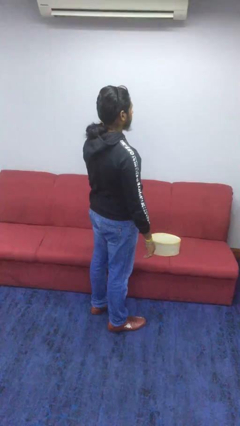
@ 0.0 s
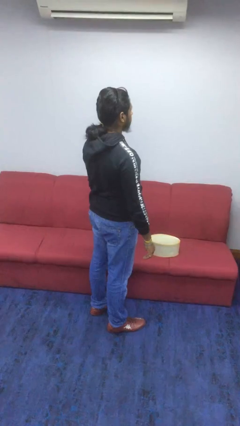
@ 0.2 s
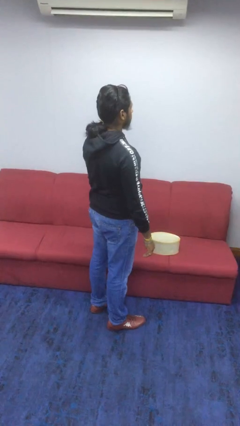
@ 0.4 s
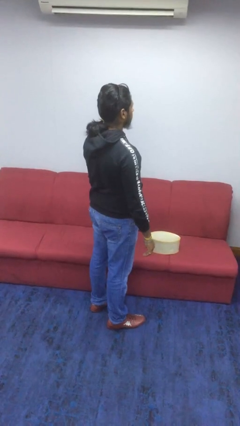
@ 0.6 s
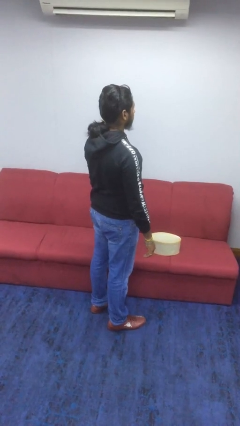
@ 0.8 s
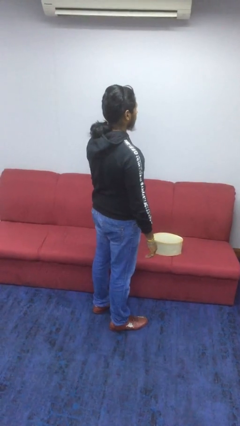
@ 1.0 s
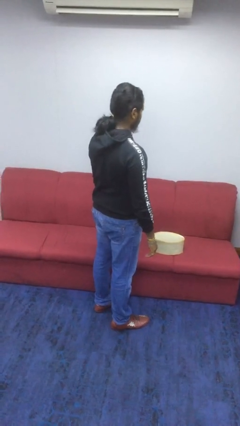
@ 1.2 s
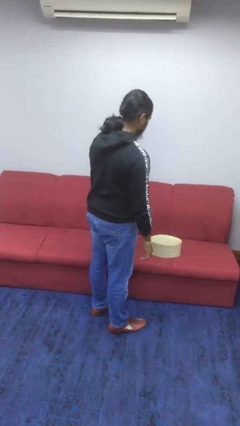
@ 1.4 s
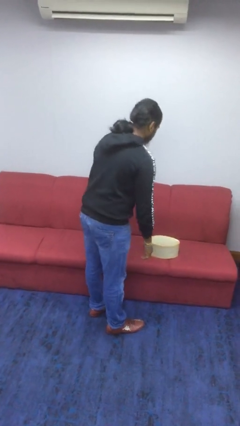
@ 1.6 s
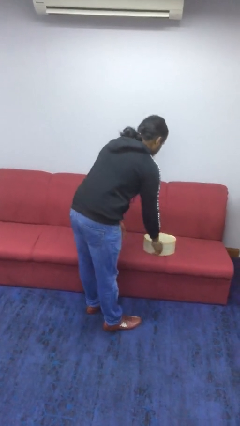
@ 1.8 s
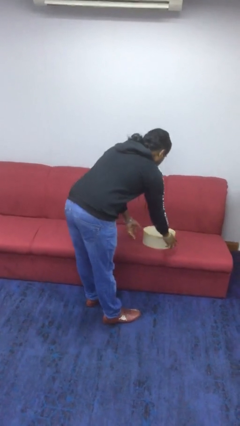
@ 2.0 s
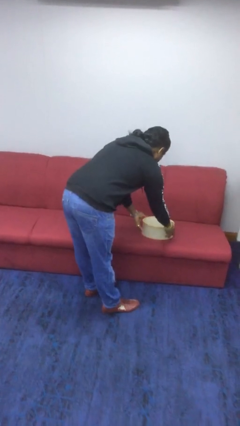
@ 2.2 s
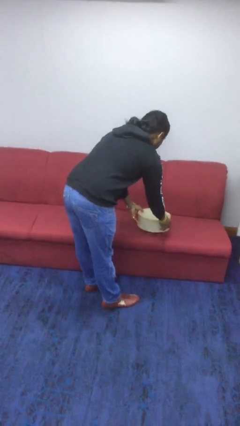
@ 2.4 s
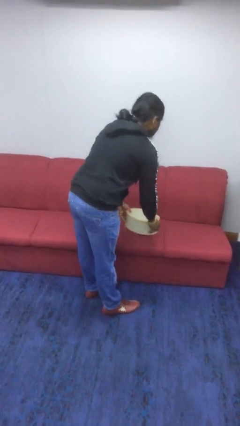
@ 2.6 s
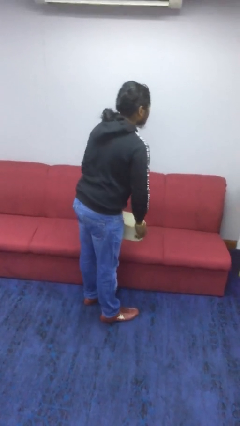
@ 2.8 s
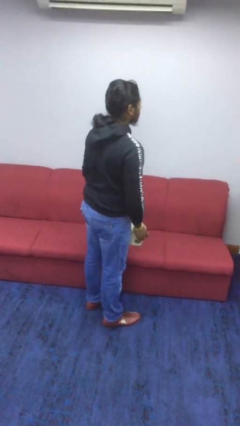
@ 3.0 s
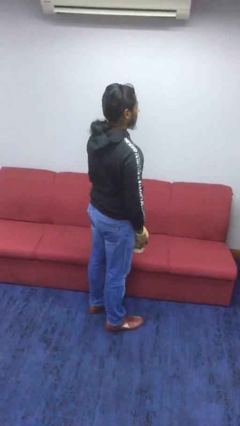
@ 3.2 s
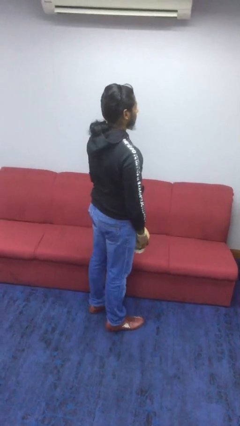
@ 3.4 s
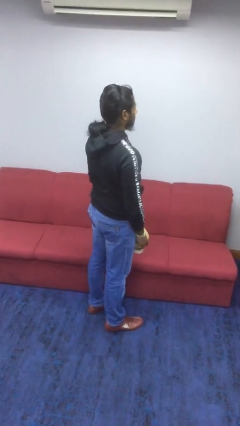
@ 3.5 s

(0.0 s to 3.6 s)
person picks up object from couch

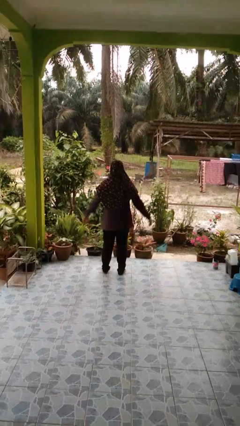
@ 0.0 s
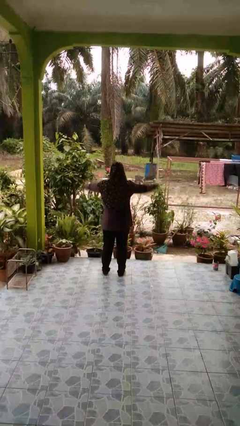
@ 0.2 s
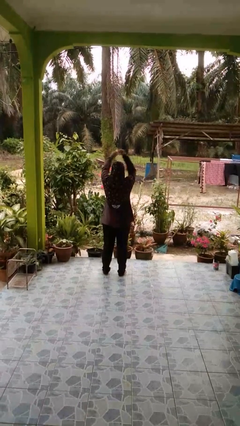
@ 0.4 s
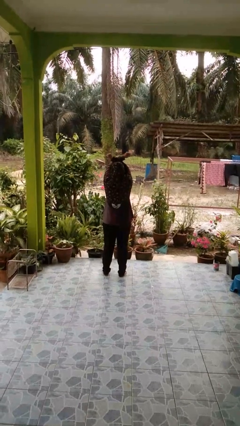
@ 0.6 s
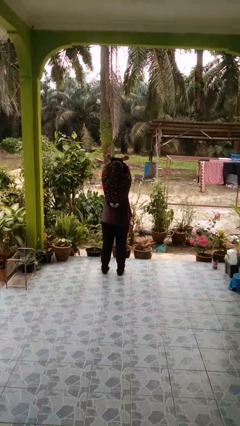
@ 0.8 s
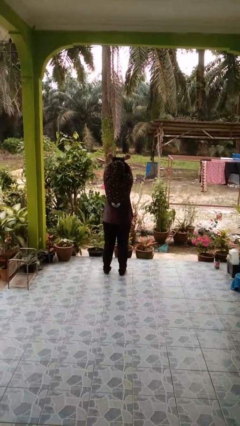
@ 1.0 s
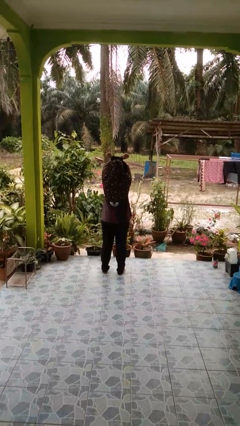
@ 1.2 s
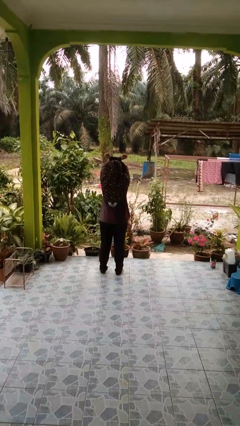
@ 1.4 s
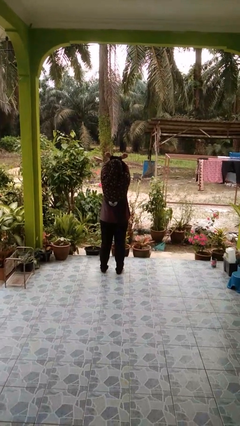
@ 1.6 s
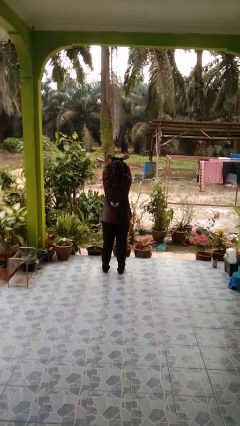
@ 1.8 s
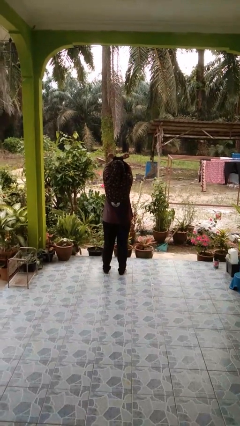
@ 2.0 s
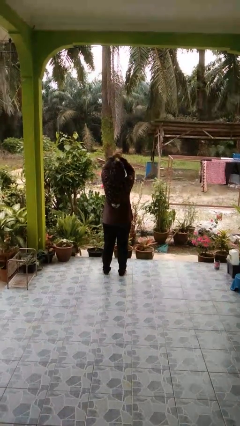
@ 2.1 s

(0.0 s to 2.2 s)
person crosses arms

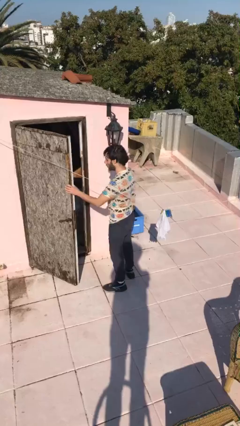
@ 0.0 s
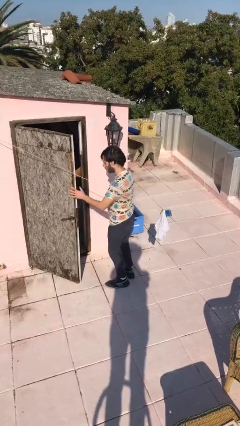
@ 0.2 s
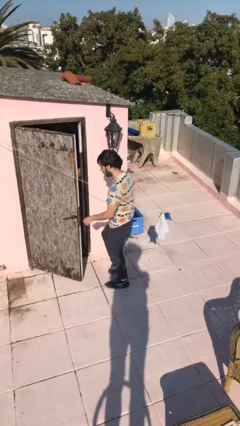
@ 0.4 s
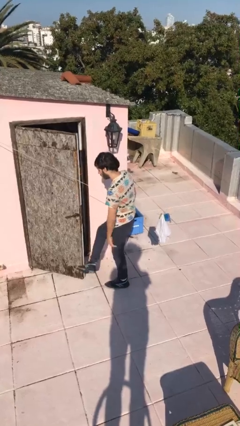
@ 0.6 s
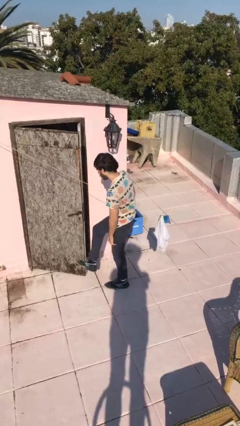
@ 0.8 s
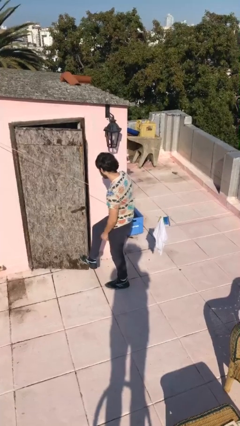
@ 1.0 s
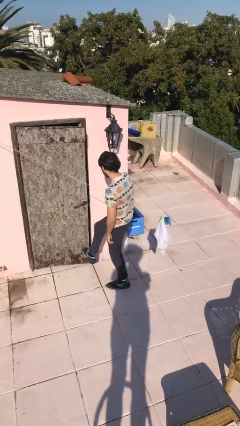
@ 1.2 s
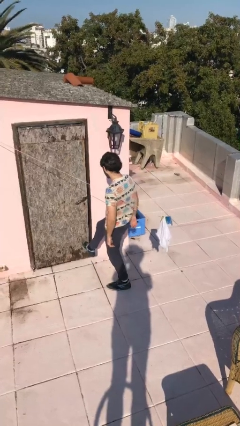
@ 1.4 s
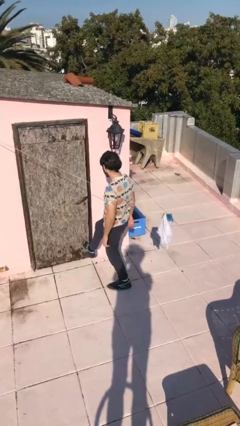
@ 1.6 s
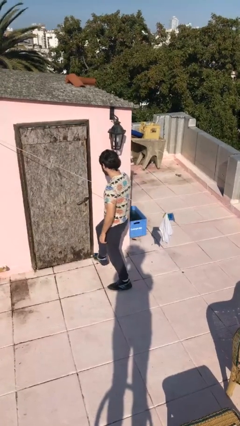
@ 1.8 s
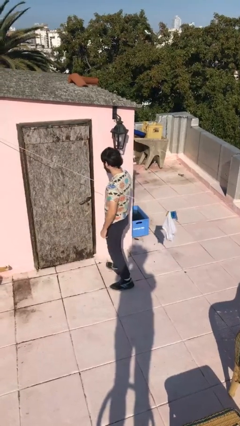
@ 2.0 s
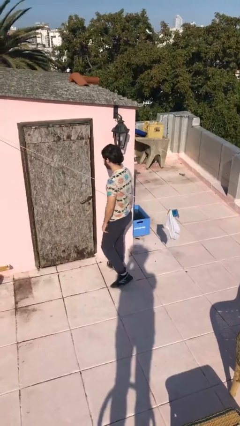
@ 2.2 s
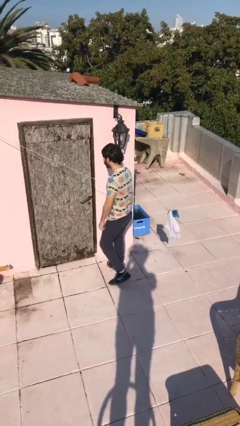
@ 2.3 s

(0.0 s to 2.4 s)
person closes door with foot

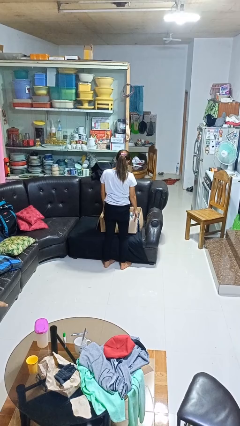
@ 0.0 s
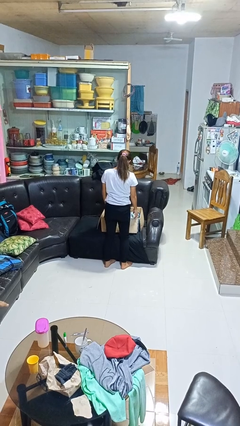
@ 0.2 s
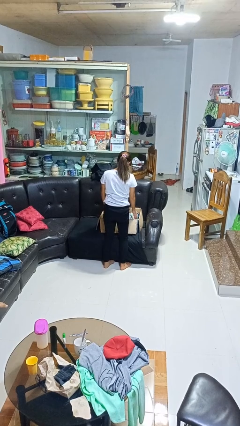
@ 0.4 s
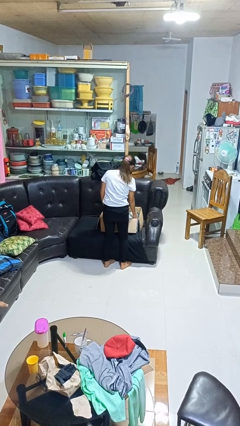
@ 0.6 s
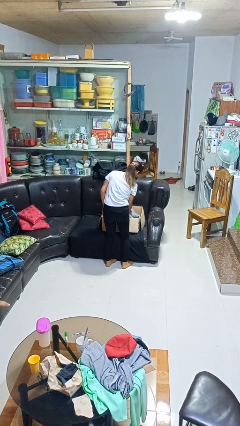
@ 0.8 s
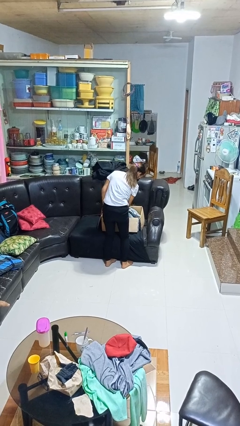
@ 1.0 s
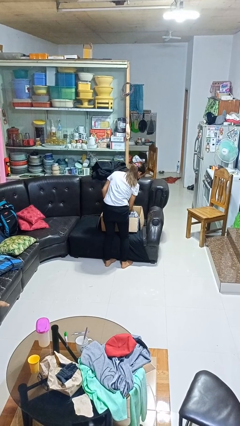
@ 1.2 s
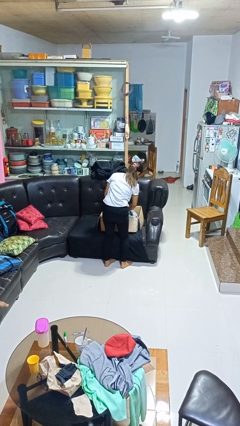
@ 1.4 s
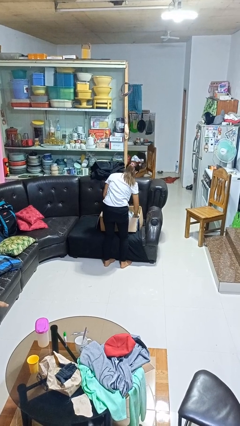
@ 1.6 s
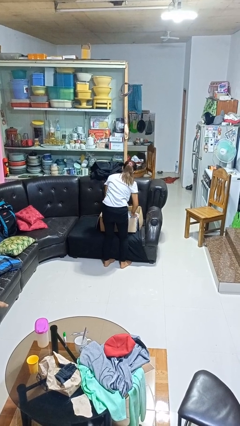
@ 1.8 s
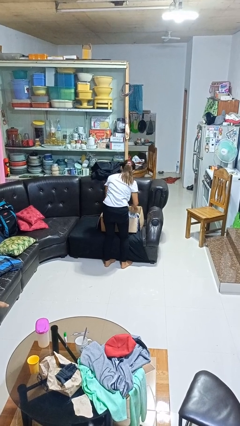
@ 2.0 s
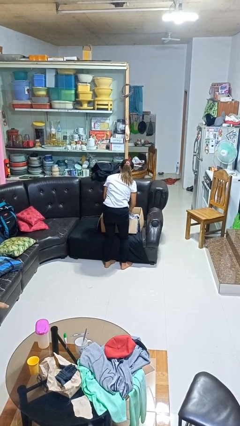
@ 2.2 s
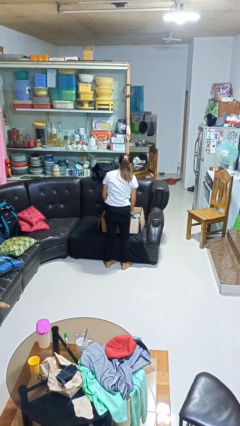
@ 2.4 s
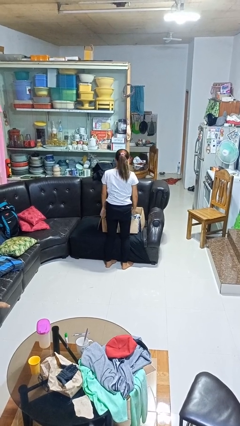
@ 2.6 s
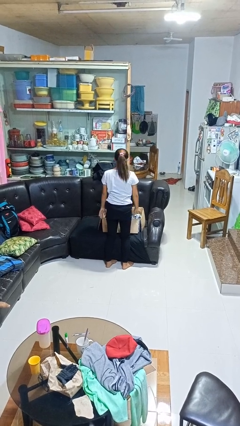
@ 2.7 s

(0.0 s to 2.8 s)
person searches in box

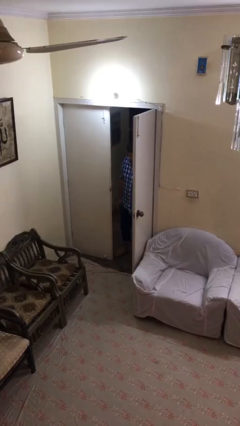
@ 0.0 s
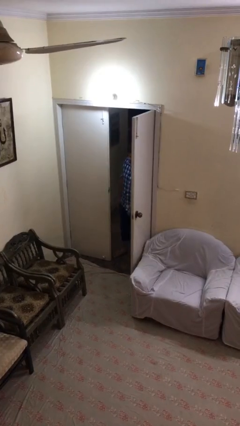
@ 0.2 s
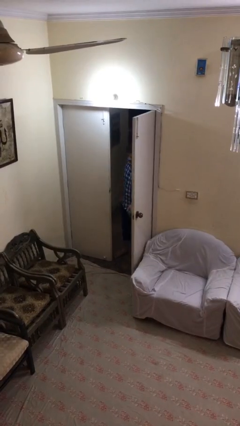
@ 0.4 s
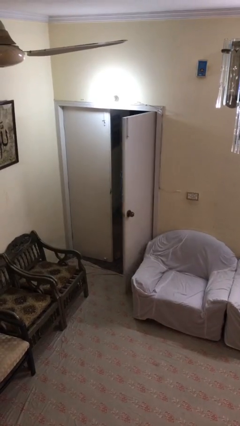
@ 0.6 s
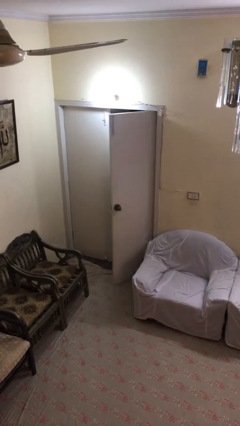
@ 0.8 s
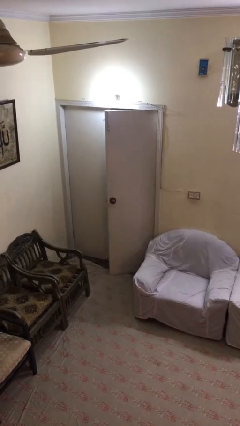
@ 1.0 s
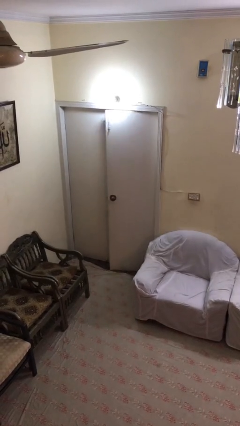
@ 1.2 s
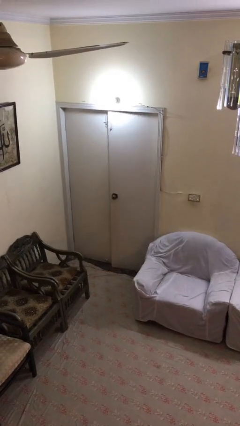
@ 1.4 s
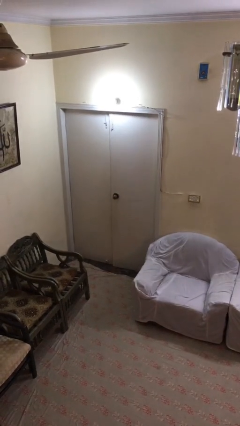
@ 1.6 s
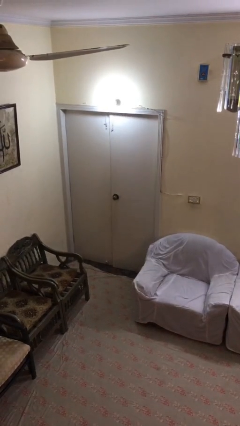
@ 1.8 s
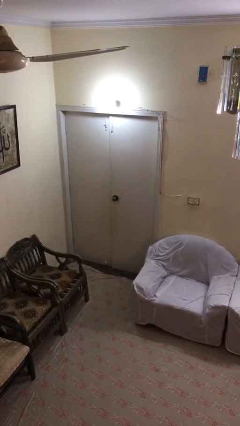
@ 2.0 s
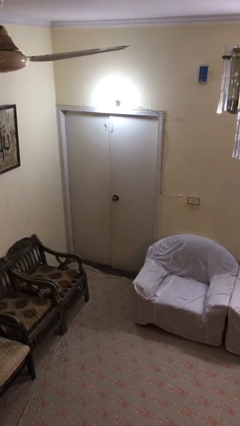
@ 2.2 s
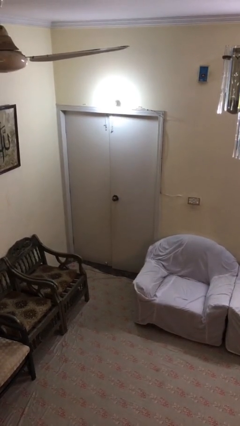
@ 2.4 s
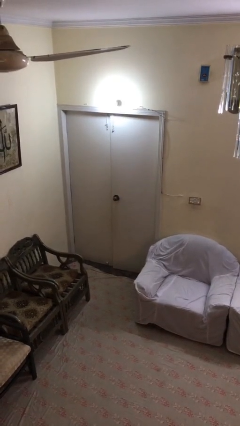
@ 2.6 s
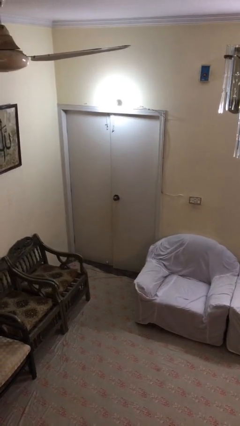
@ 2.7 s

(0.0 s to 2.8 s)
person closes facility door

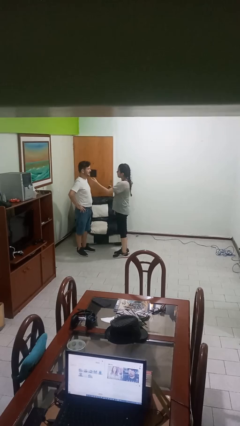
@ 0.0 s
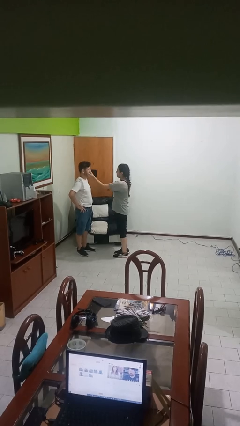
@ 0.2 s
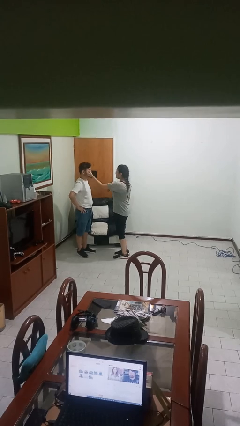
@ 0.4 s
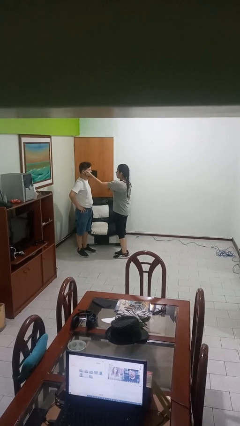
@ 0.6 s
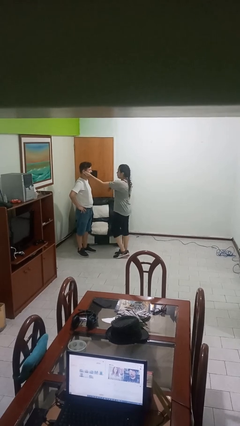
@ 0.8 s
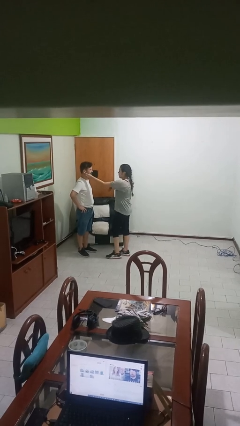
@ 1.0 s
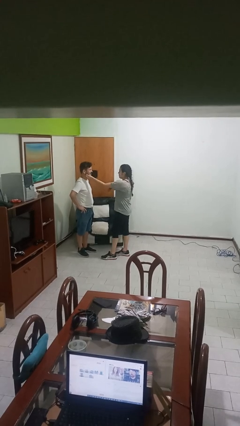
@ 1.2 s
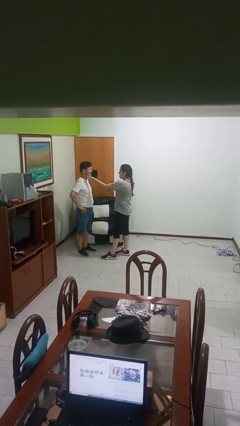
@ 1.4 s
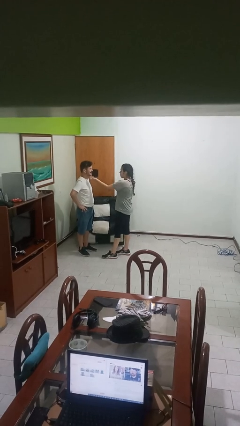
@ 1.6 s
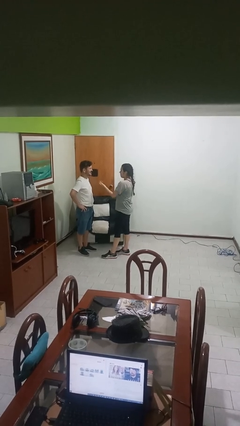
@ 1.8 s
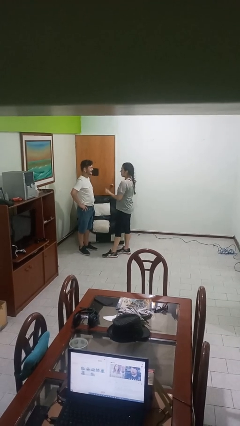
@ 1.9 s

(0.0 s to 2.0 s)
person touches face of person

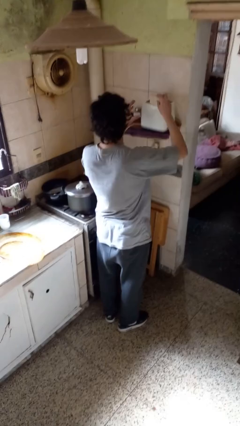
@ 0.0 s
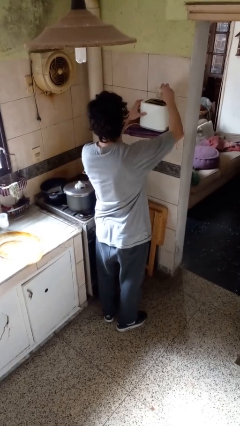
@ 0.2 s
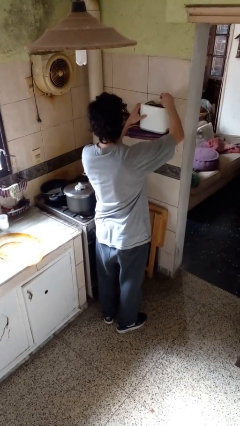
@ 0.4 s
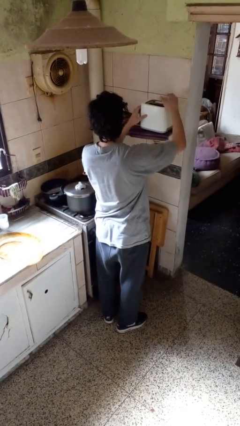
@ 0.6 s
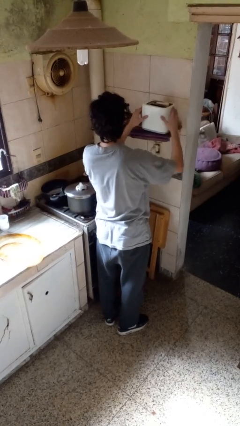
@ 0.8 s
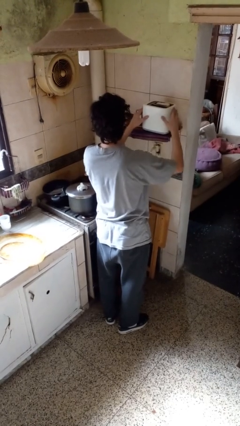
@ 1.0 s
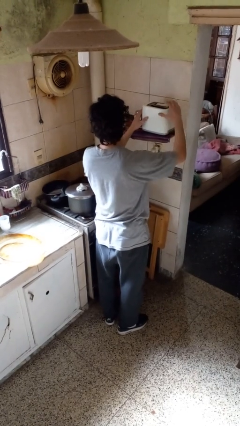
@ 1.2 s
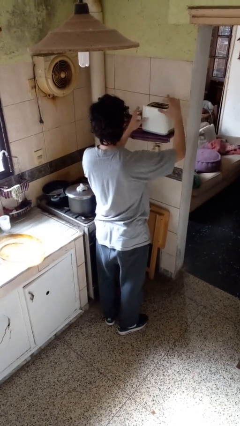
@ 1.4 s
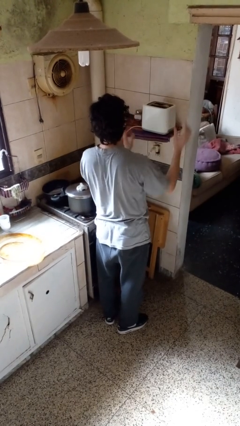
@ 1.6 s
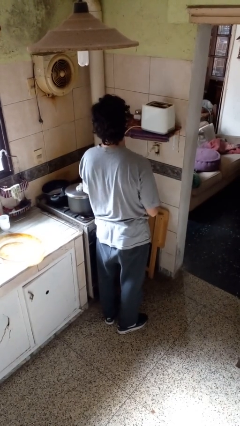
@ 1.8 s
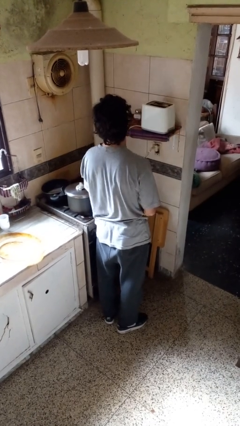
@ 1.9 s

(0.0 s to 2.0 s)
person puts object into toaster
